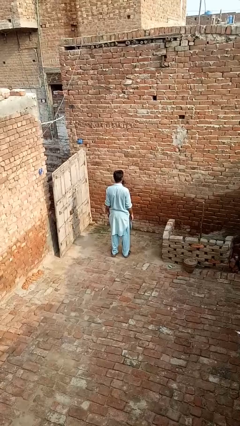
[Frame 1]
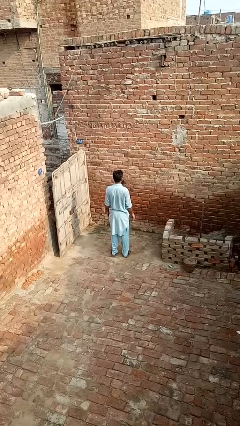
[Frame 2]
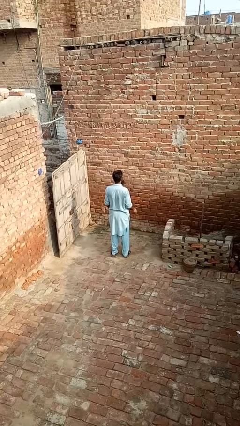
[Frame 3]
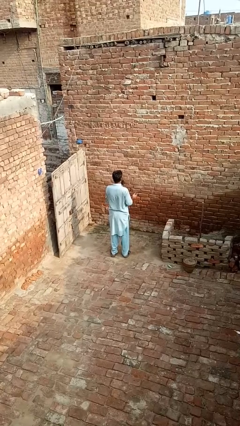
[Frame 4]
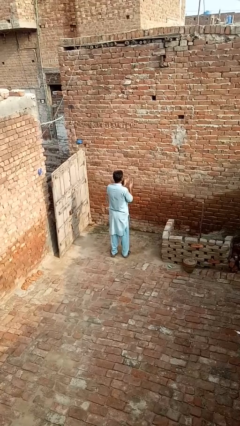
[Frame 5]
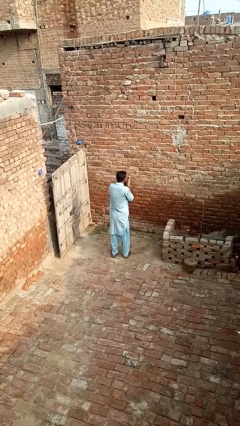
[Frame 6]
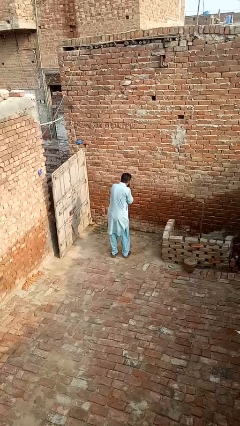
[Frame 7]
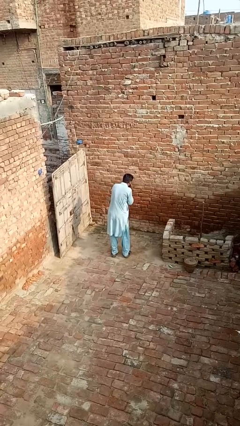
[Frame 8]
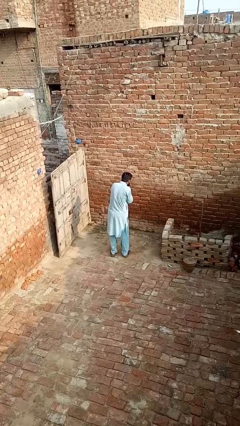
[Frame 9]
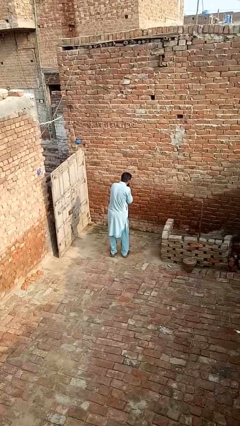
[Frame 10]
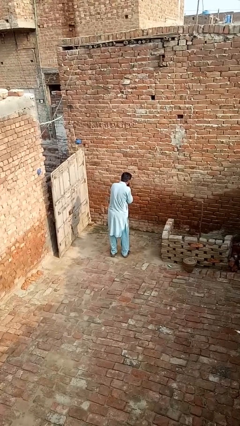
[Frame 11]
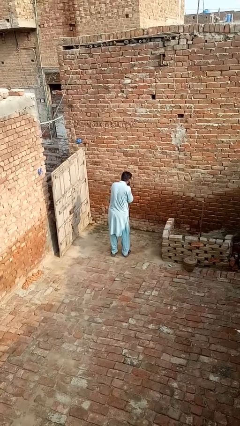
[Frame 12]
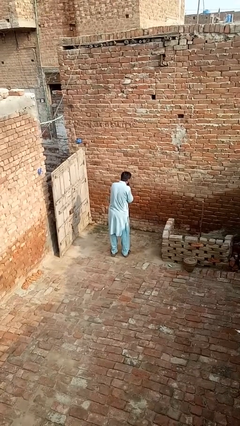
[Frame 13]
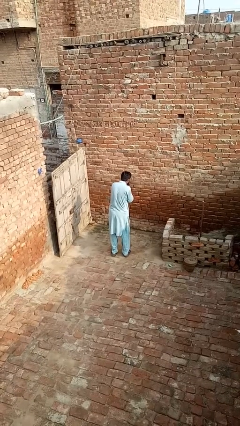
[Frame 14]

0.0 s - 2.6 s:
person sneezes into hand

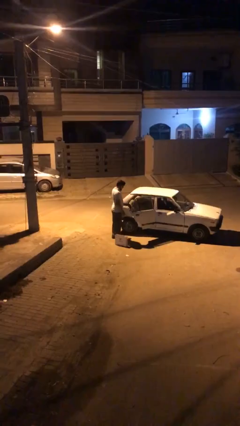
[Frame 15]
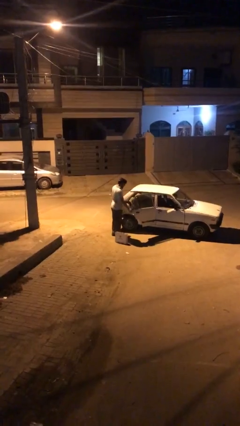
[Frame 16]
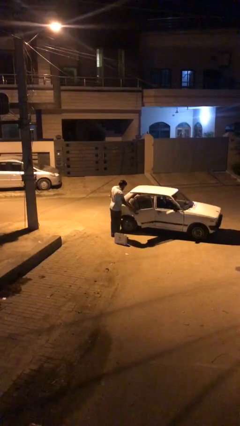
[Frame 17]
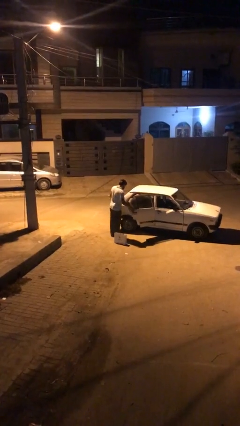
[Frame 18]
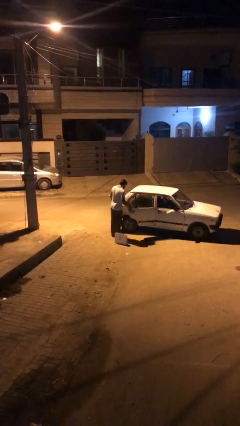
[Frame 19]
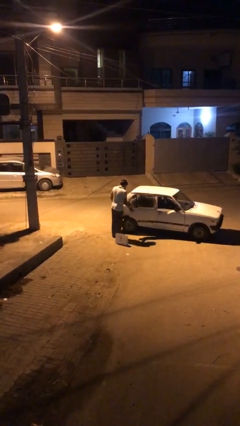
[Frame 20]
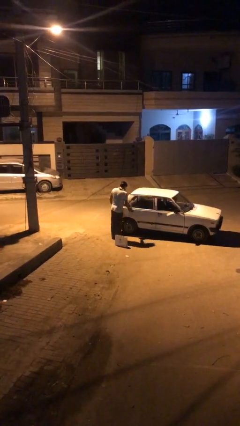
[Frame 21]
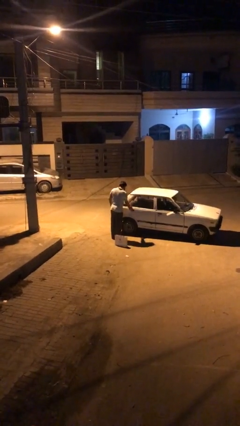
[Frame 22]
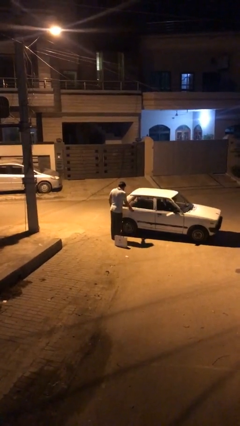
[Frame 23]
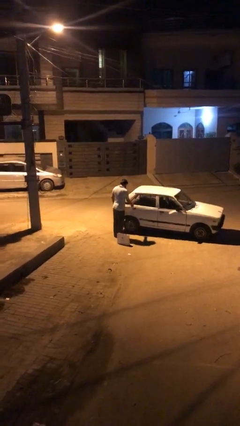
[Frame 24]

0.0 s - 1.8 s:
person closes car door

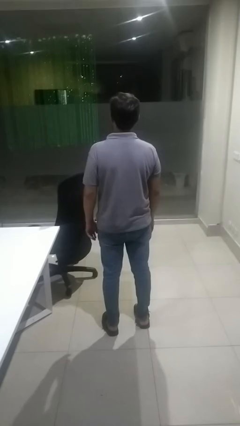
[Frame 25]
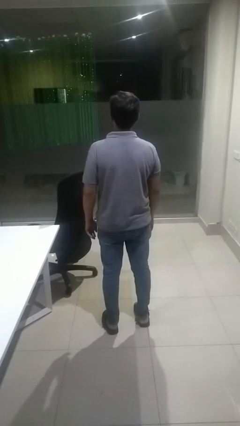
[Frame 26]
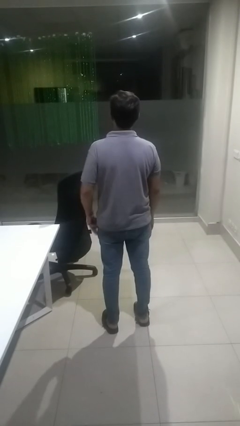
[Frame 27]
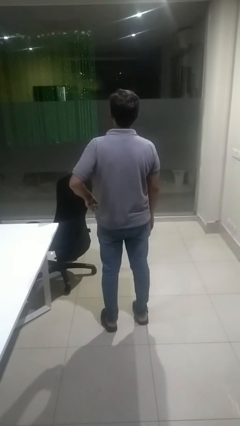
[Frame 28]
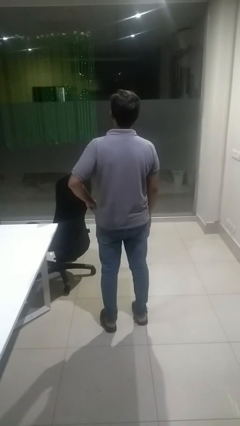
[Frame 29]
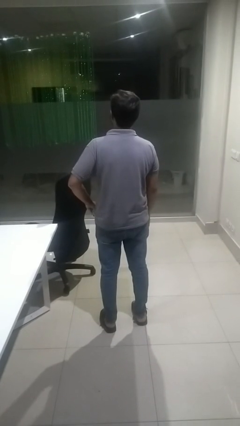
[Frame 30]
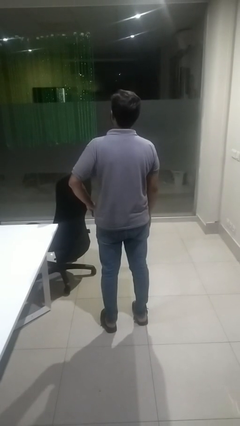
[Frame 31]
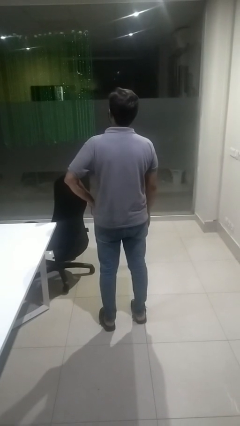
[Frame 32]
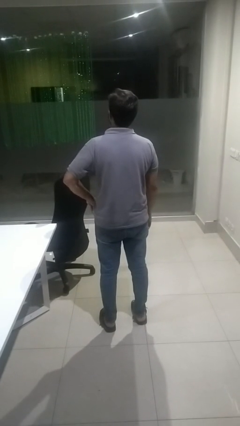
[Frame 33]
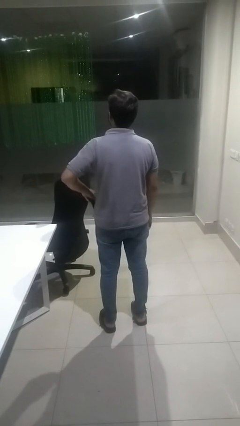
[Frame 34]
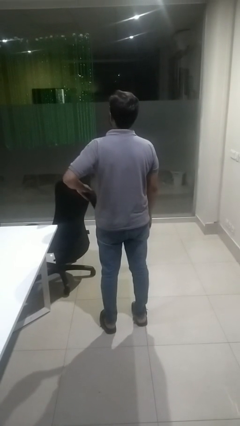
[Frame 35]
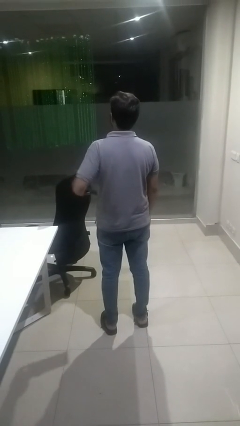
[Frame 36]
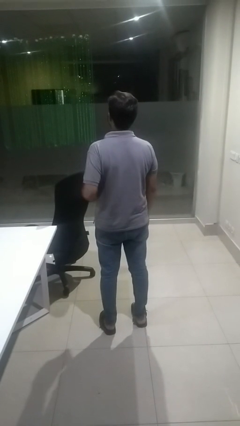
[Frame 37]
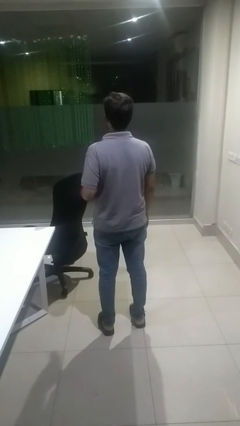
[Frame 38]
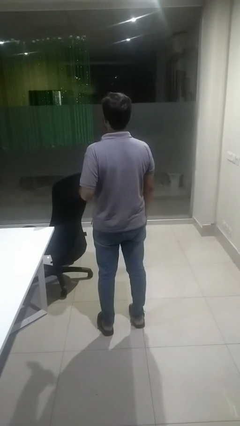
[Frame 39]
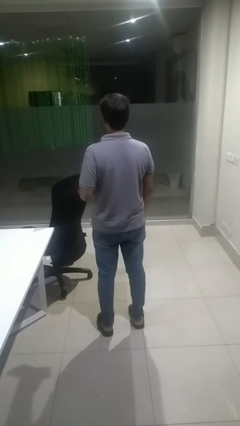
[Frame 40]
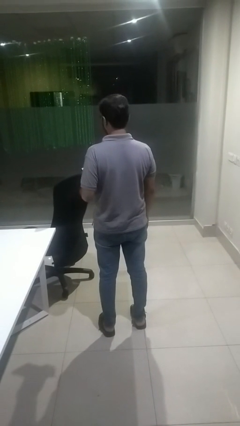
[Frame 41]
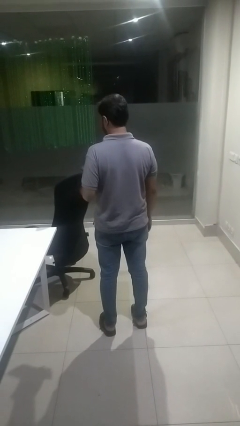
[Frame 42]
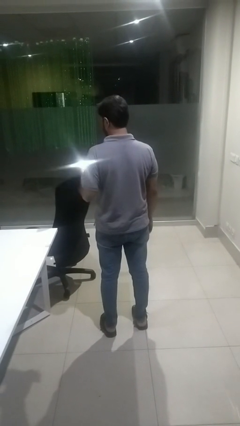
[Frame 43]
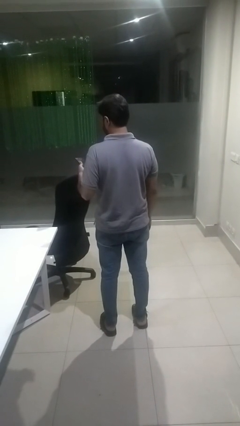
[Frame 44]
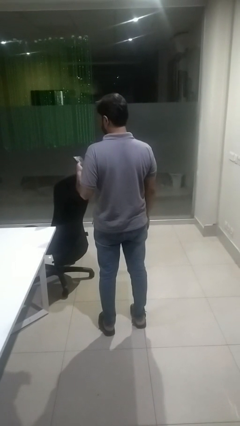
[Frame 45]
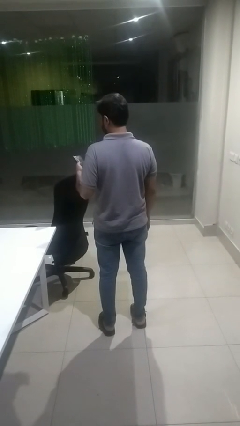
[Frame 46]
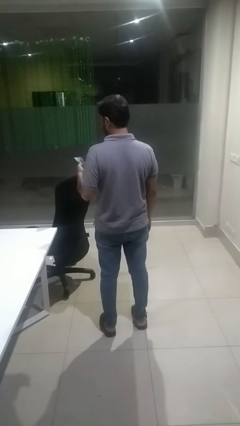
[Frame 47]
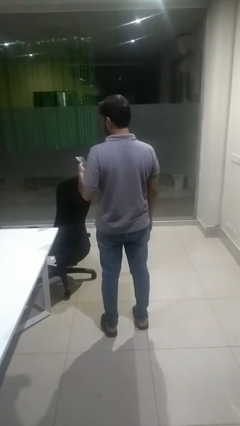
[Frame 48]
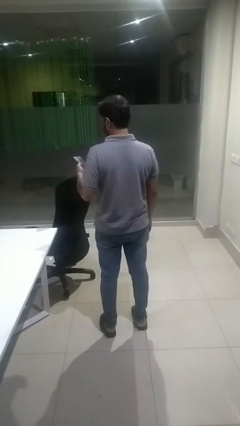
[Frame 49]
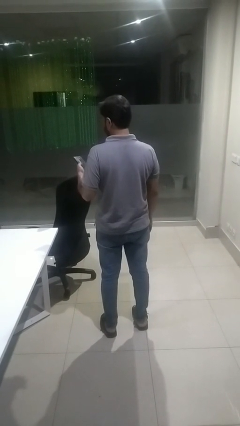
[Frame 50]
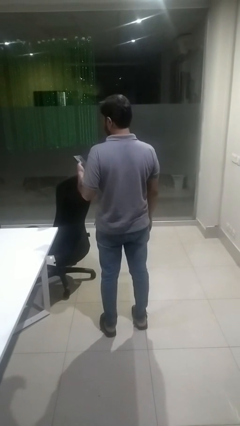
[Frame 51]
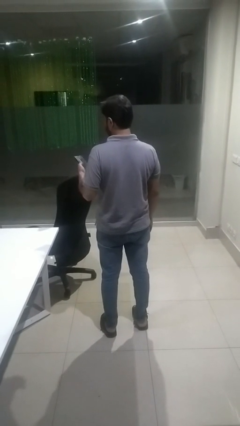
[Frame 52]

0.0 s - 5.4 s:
person takes phone from pocket

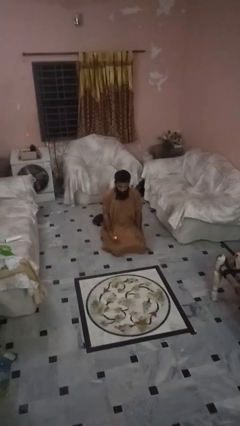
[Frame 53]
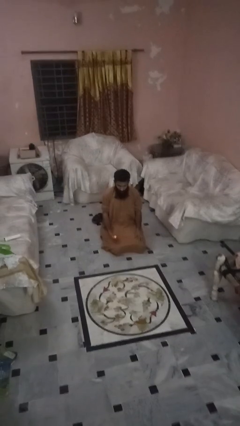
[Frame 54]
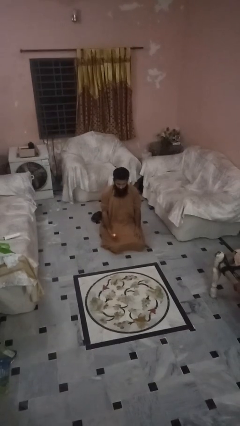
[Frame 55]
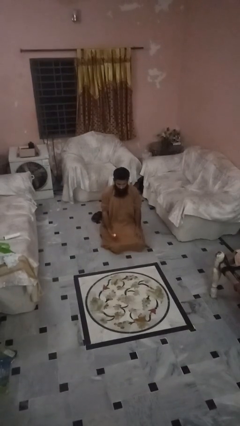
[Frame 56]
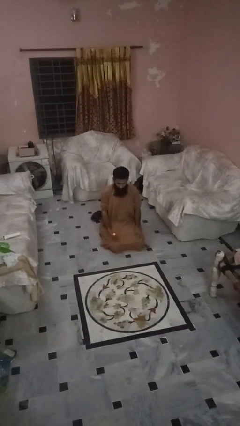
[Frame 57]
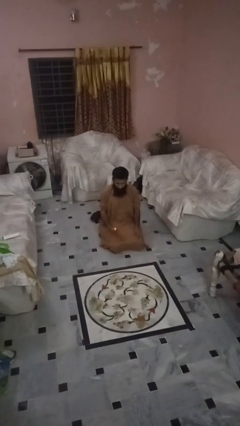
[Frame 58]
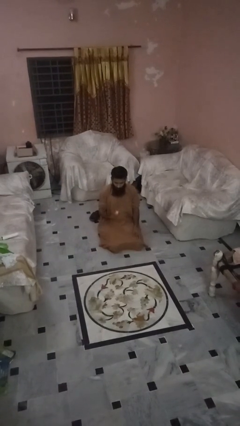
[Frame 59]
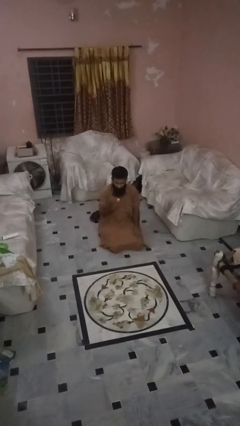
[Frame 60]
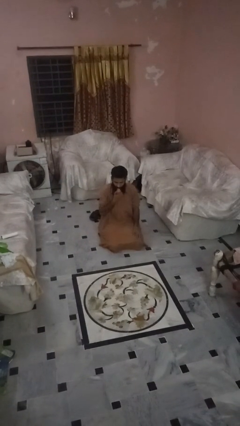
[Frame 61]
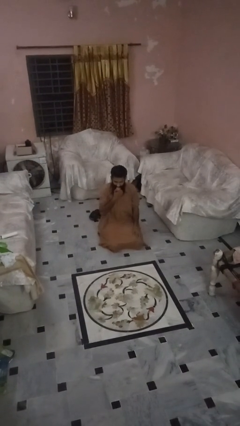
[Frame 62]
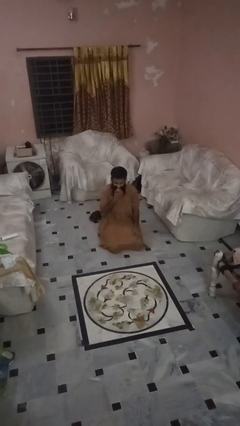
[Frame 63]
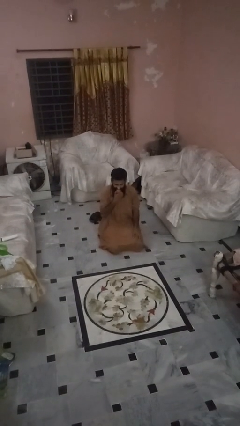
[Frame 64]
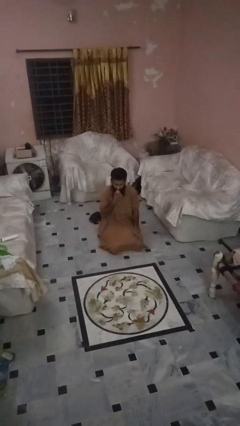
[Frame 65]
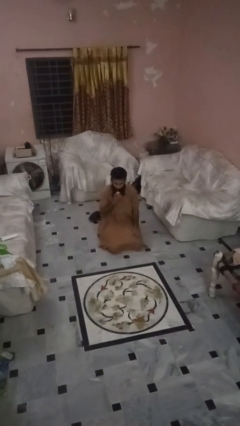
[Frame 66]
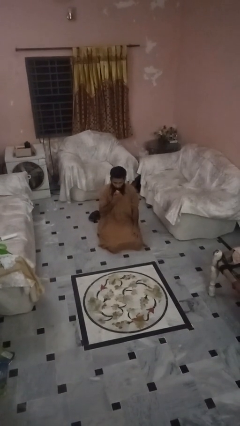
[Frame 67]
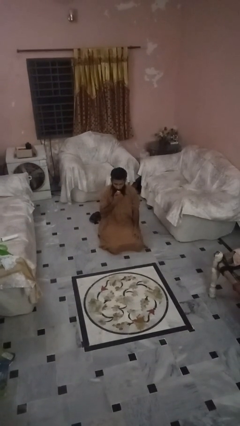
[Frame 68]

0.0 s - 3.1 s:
person eats apple

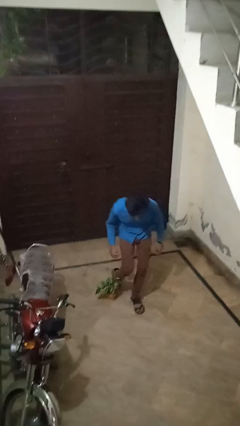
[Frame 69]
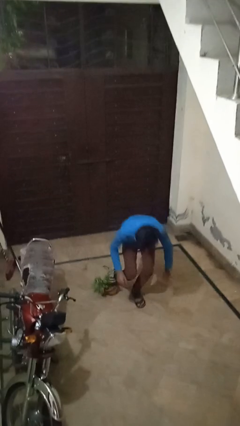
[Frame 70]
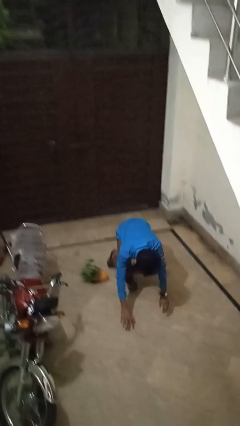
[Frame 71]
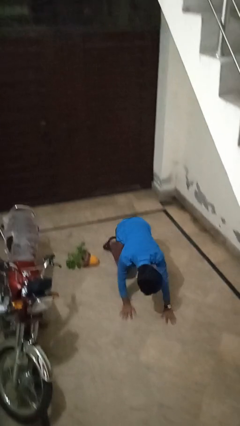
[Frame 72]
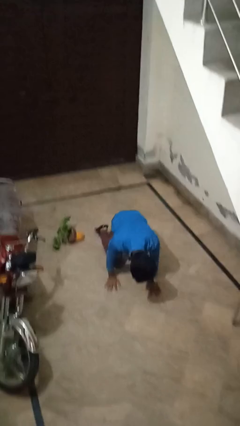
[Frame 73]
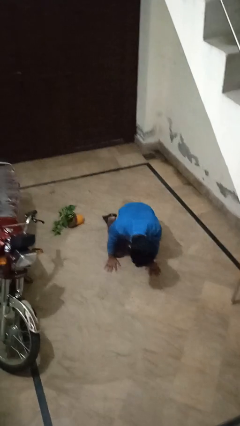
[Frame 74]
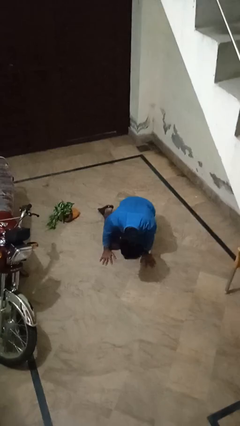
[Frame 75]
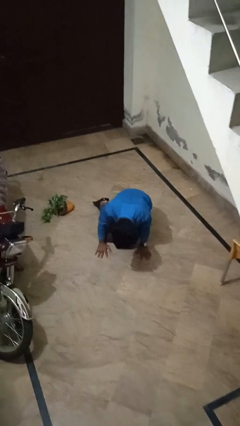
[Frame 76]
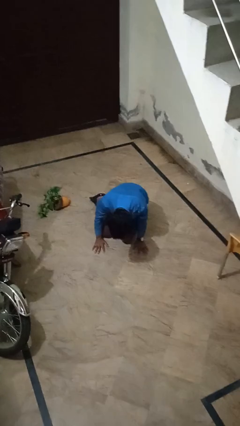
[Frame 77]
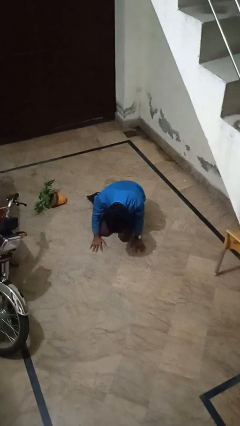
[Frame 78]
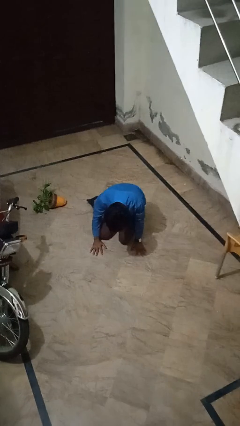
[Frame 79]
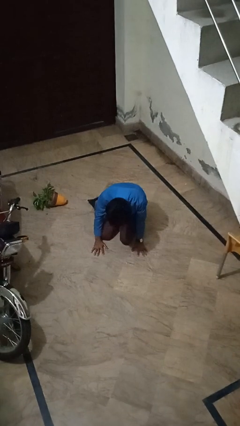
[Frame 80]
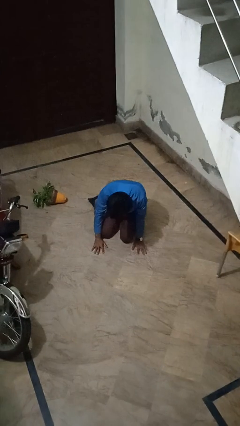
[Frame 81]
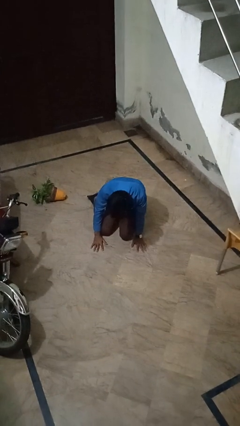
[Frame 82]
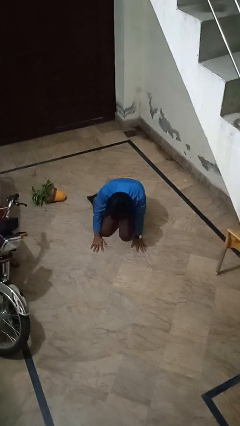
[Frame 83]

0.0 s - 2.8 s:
person trips on object on floor

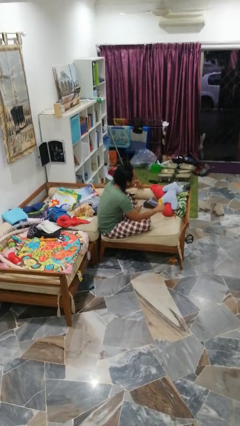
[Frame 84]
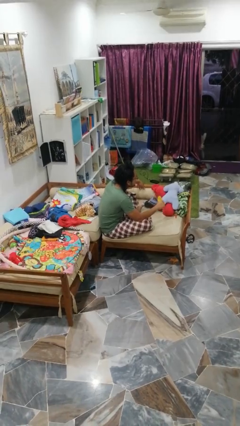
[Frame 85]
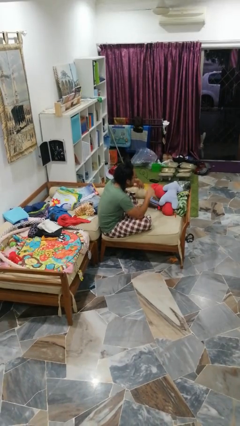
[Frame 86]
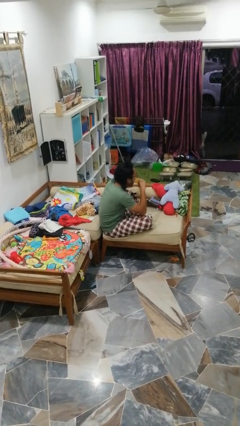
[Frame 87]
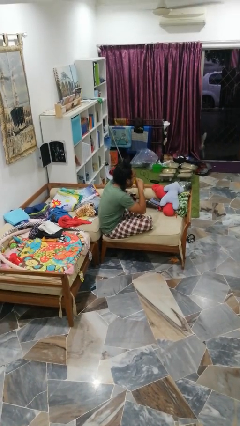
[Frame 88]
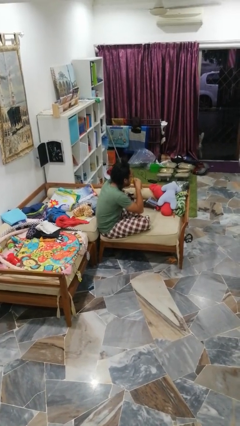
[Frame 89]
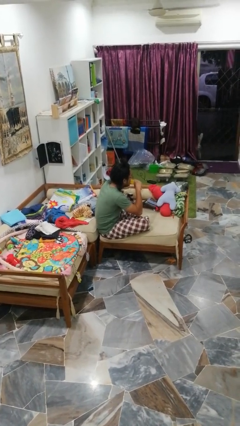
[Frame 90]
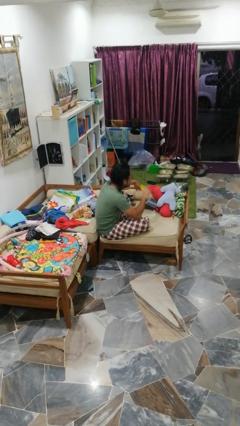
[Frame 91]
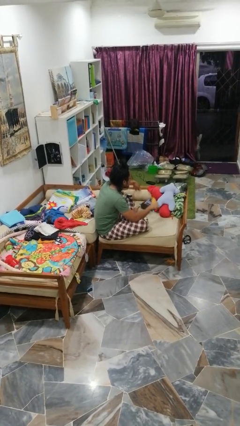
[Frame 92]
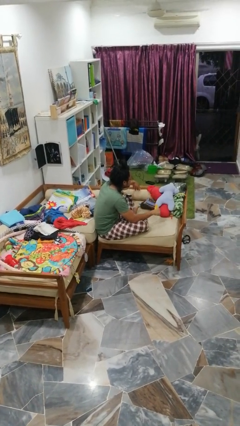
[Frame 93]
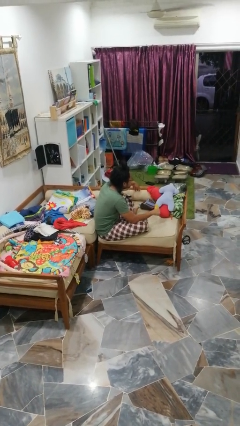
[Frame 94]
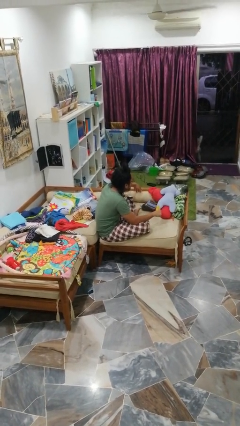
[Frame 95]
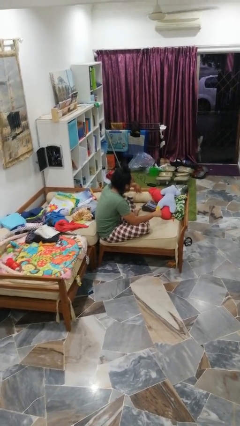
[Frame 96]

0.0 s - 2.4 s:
person eats banana
